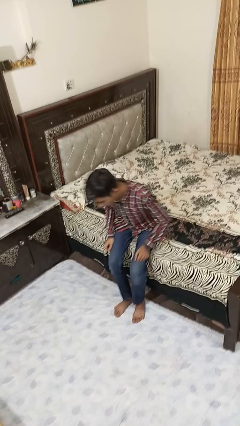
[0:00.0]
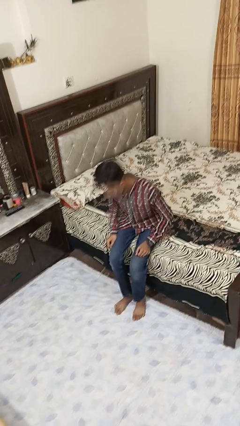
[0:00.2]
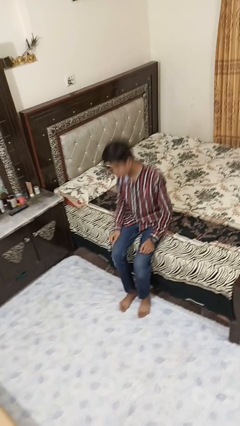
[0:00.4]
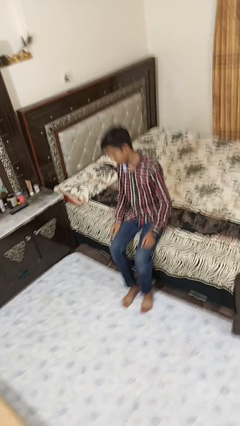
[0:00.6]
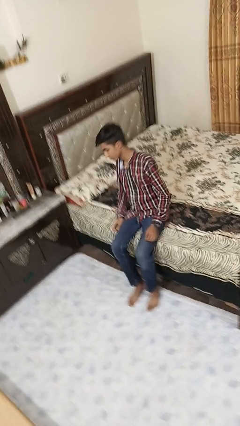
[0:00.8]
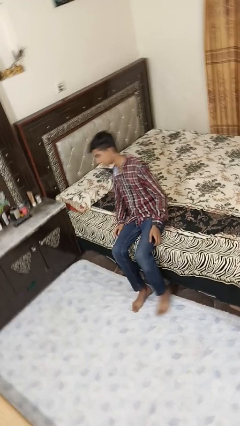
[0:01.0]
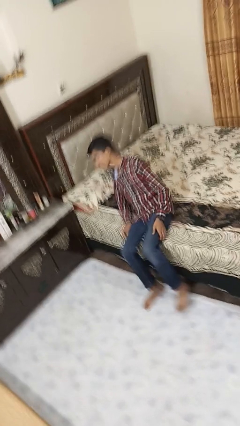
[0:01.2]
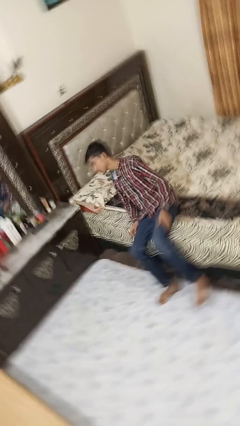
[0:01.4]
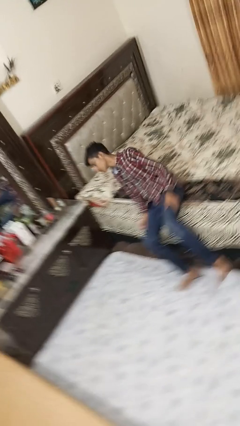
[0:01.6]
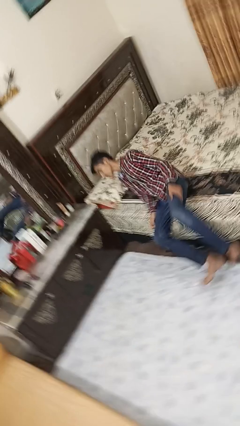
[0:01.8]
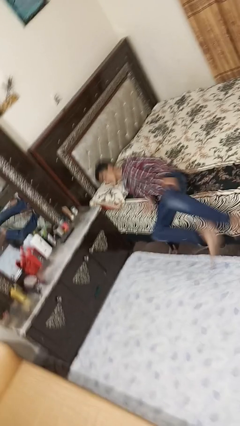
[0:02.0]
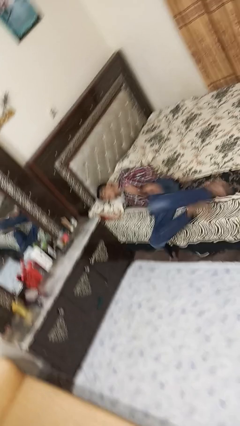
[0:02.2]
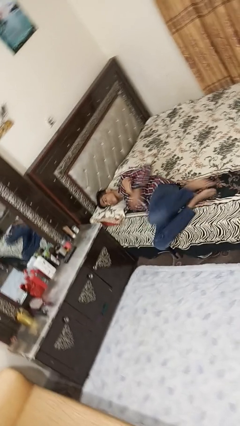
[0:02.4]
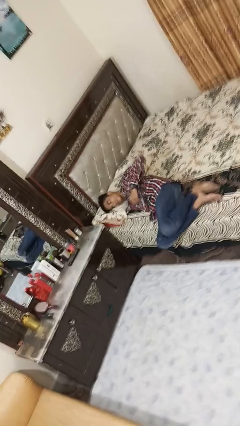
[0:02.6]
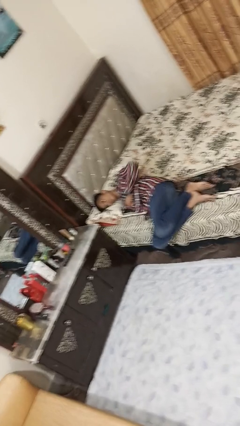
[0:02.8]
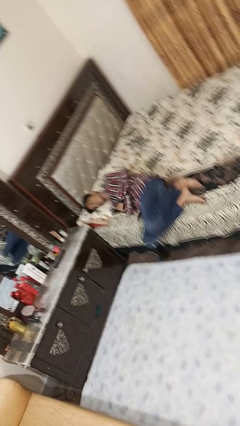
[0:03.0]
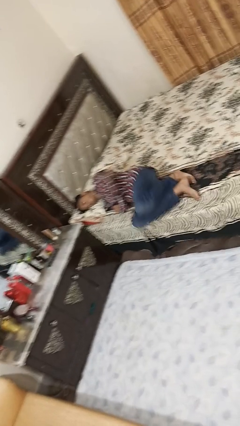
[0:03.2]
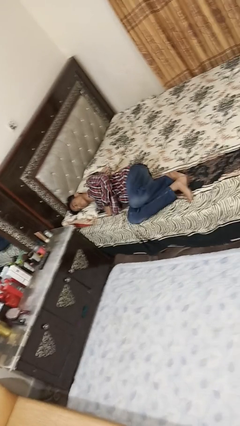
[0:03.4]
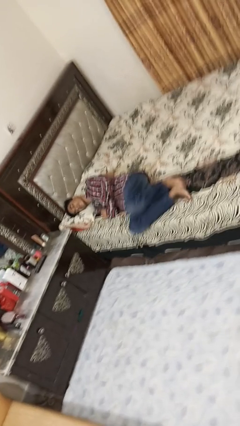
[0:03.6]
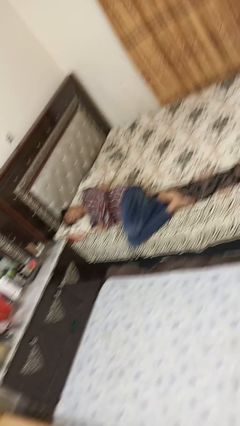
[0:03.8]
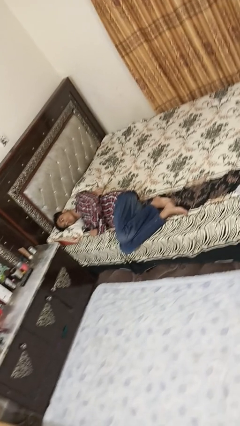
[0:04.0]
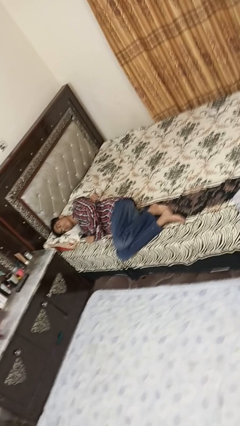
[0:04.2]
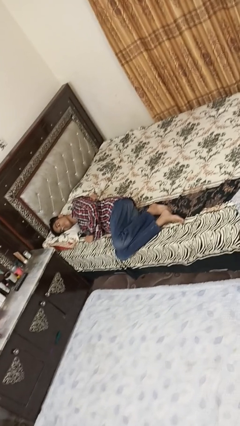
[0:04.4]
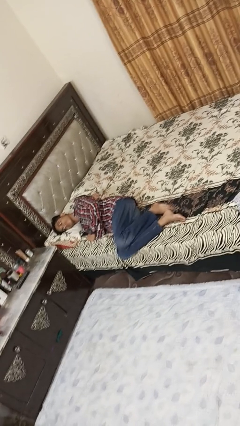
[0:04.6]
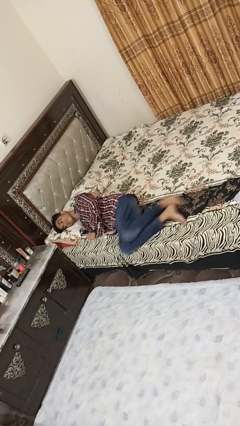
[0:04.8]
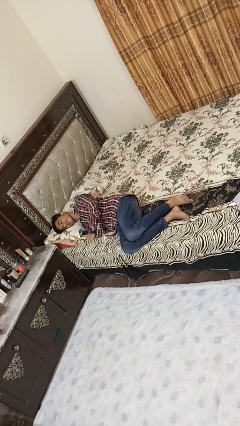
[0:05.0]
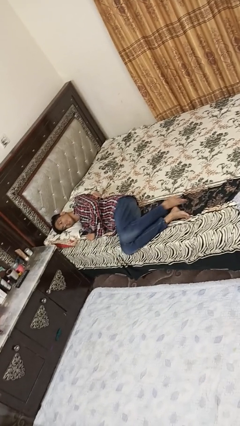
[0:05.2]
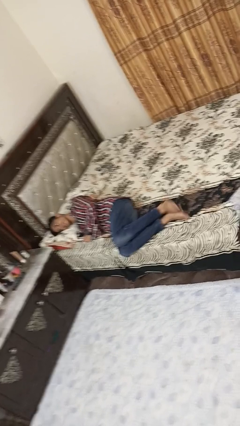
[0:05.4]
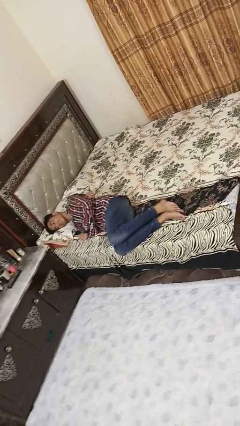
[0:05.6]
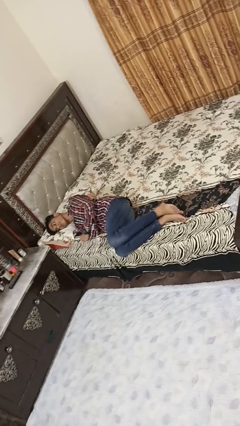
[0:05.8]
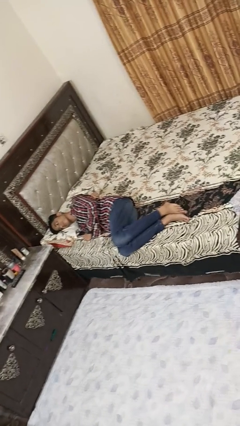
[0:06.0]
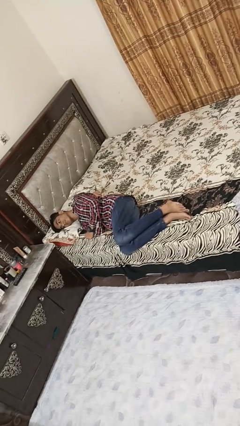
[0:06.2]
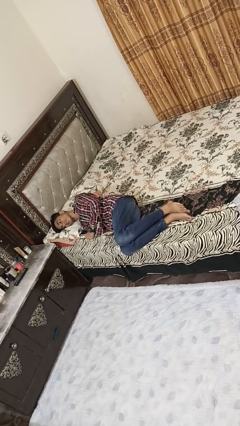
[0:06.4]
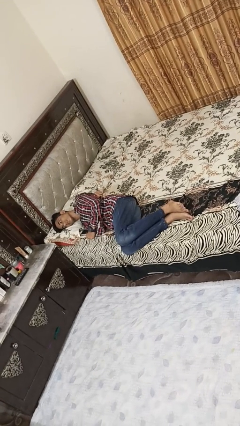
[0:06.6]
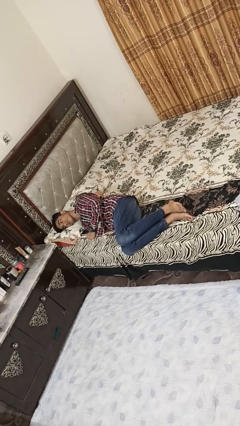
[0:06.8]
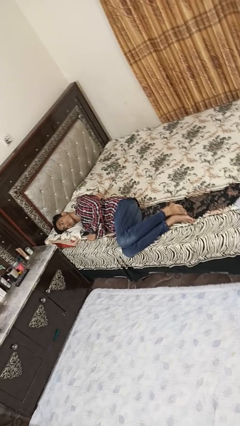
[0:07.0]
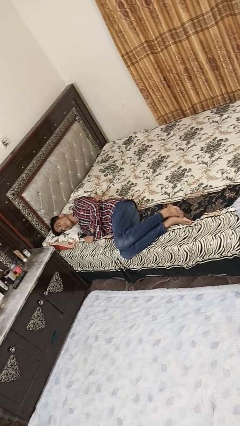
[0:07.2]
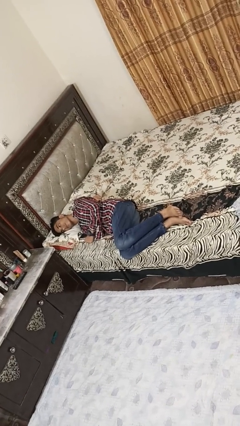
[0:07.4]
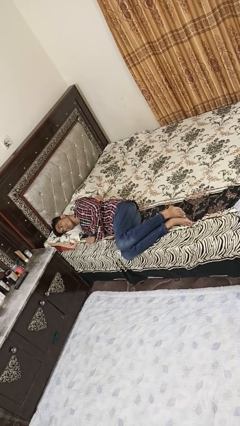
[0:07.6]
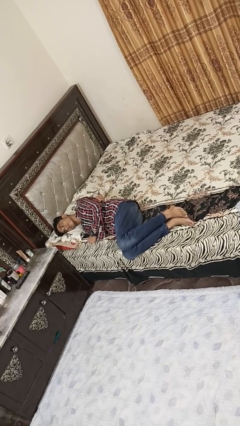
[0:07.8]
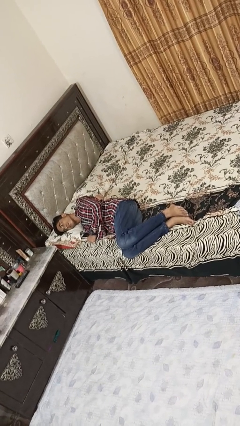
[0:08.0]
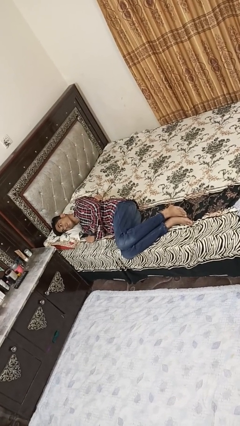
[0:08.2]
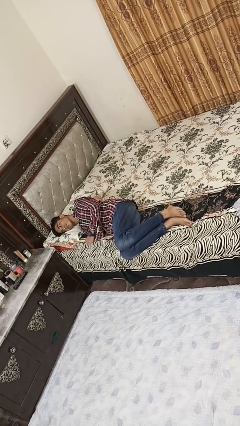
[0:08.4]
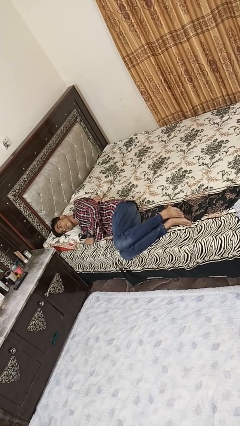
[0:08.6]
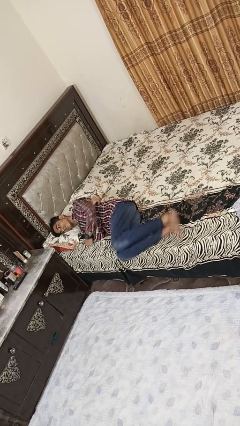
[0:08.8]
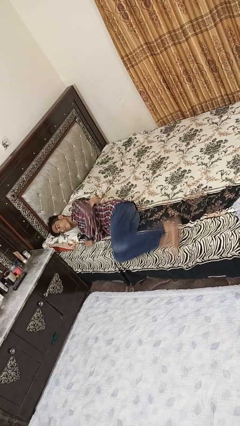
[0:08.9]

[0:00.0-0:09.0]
person lies down on bed

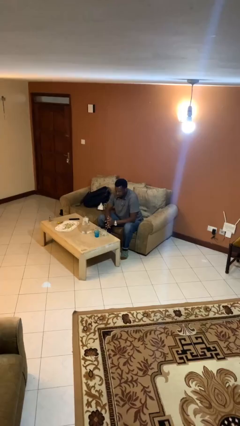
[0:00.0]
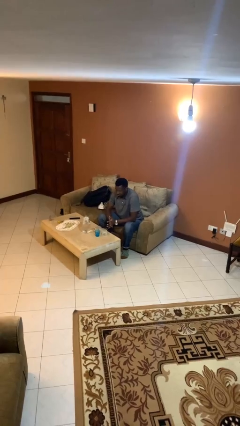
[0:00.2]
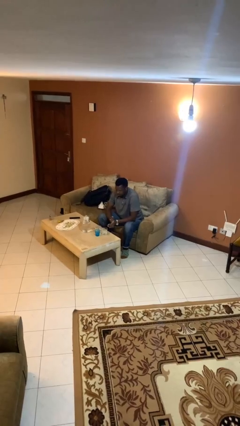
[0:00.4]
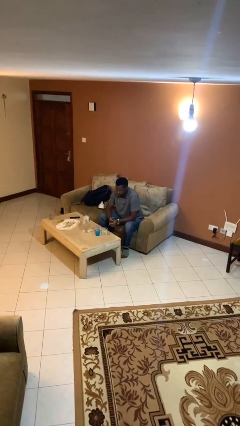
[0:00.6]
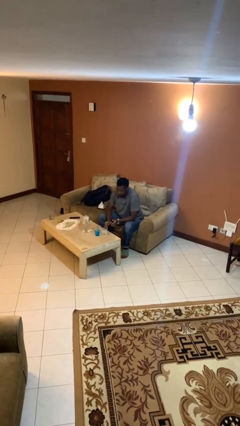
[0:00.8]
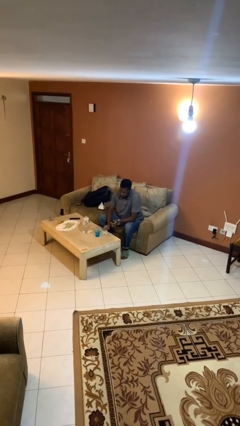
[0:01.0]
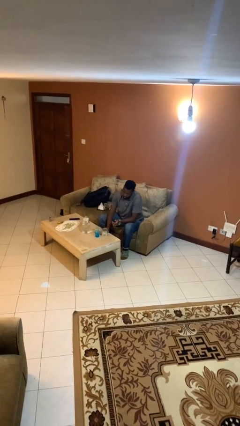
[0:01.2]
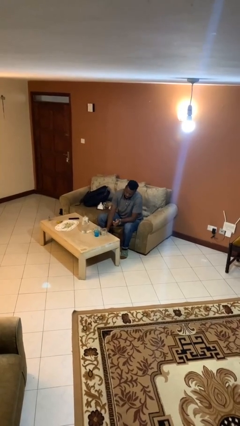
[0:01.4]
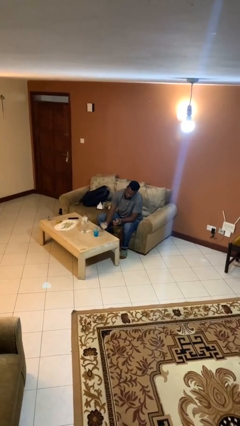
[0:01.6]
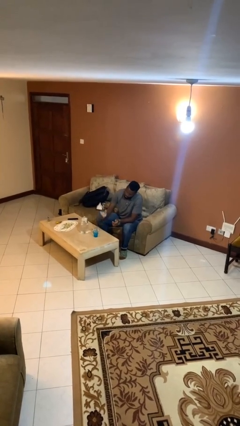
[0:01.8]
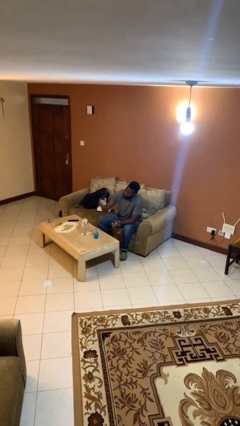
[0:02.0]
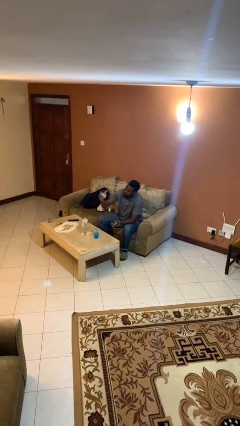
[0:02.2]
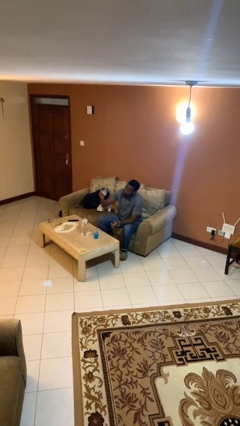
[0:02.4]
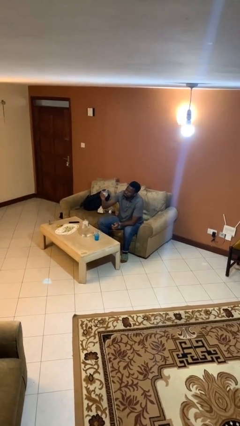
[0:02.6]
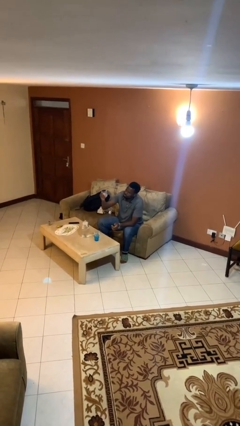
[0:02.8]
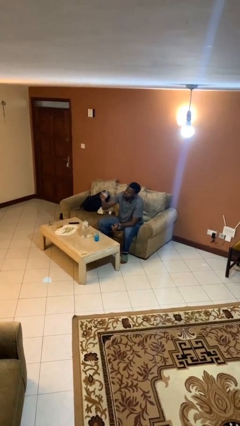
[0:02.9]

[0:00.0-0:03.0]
person picks up object from table

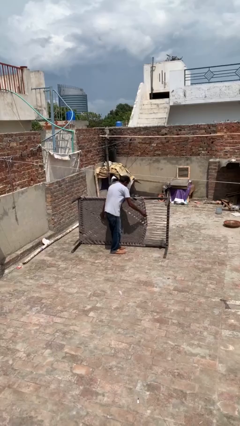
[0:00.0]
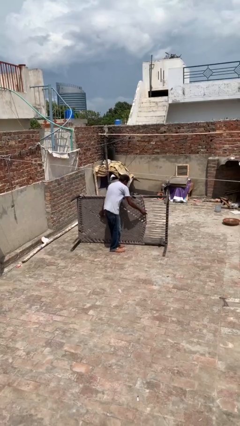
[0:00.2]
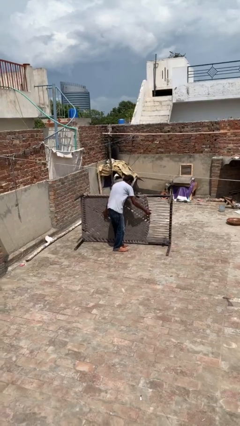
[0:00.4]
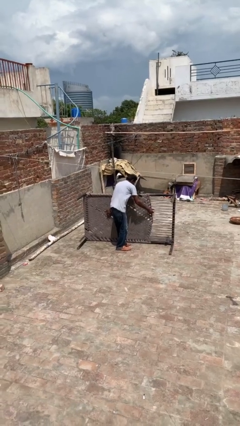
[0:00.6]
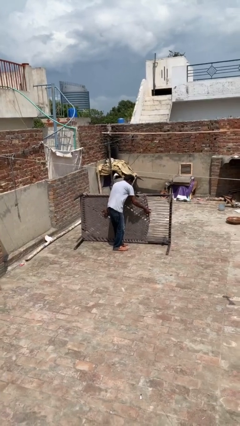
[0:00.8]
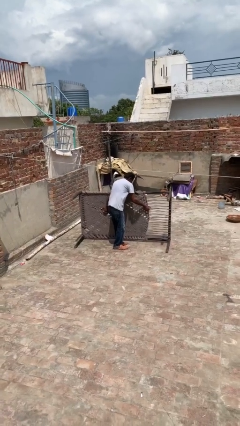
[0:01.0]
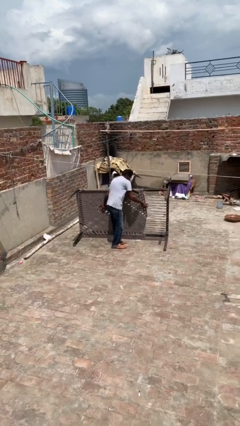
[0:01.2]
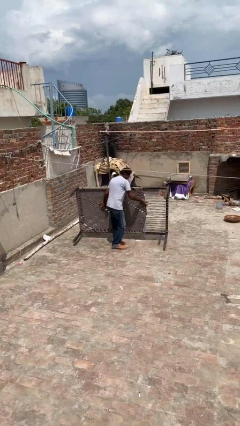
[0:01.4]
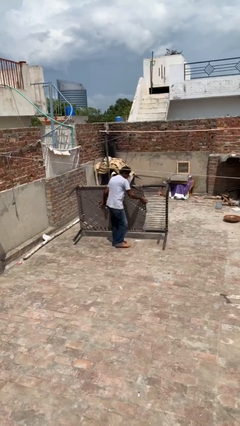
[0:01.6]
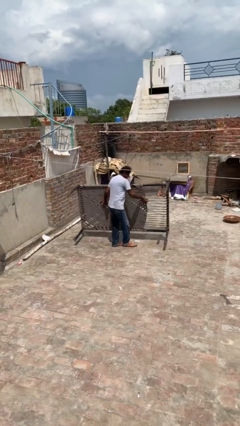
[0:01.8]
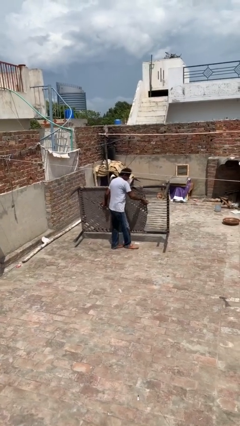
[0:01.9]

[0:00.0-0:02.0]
person picks up object from floor

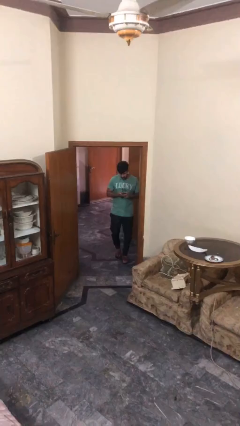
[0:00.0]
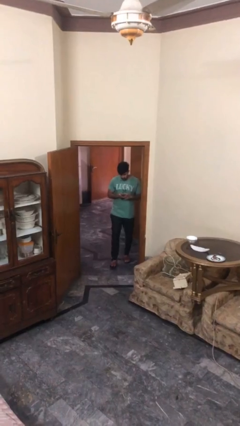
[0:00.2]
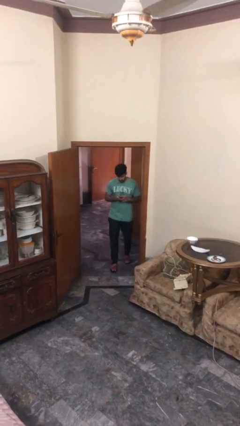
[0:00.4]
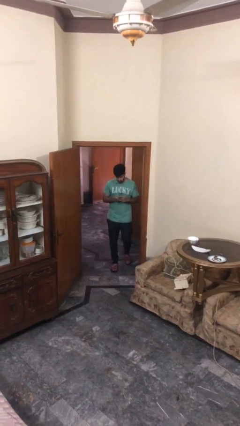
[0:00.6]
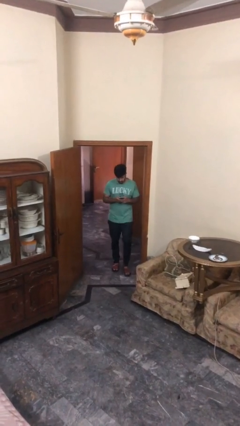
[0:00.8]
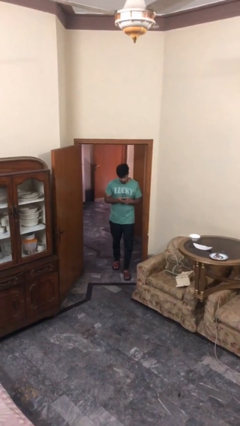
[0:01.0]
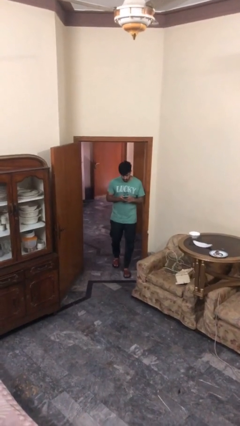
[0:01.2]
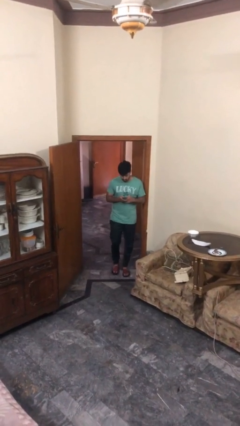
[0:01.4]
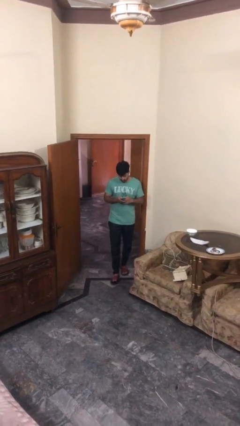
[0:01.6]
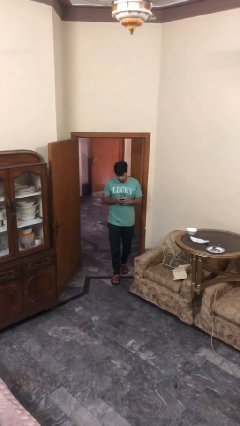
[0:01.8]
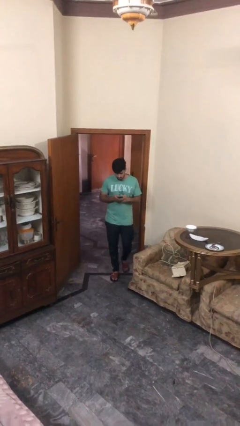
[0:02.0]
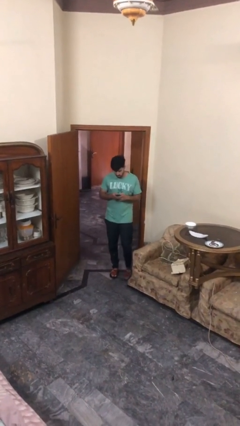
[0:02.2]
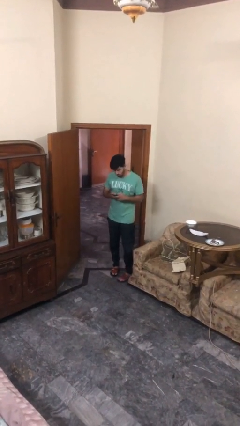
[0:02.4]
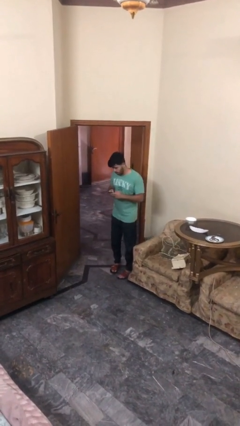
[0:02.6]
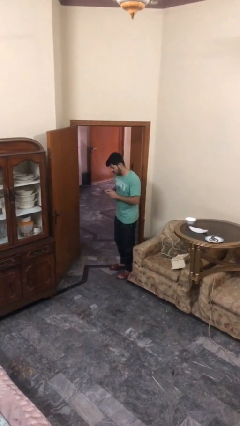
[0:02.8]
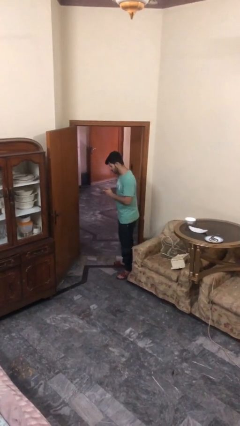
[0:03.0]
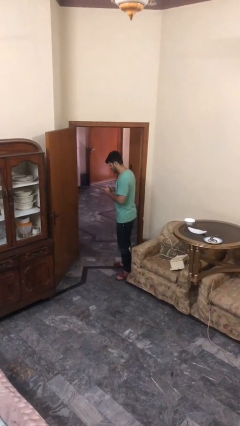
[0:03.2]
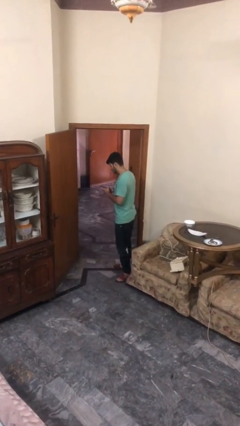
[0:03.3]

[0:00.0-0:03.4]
person enters scene through structure

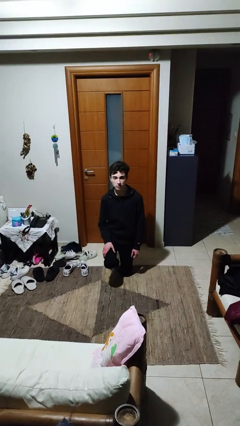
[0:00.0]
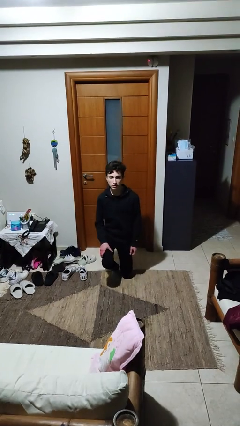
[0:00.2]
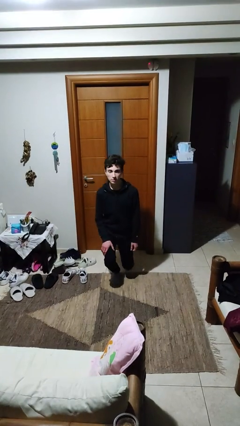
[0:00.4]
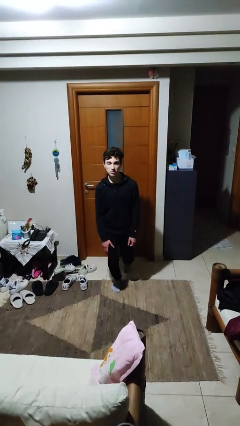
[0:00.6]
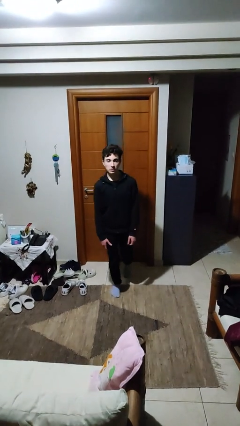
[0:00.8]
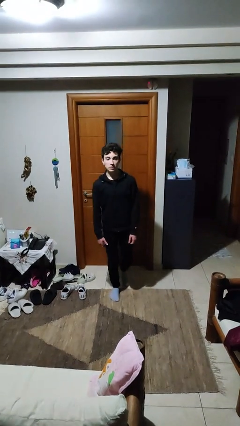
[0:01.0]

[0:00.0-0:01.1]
person stands up from floor
